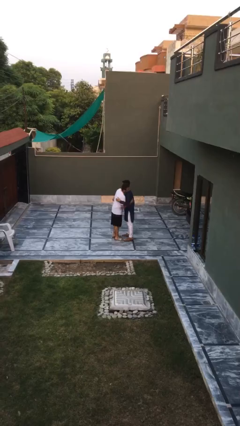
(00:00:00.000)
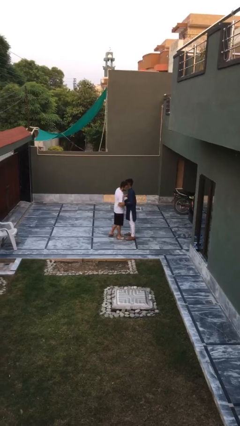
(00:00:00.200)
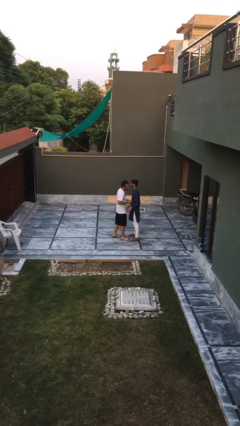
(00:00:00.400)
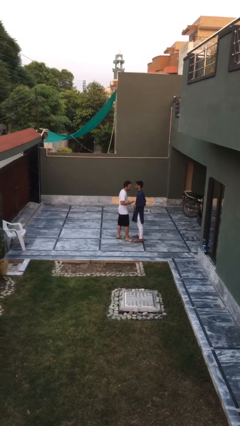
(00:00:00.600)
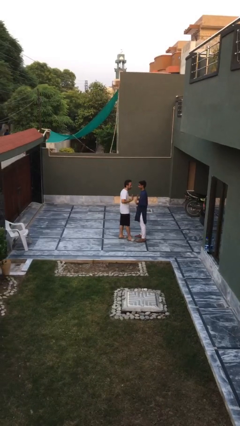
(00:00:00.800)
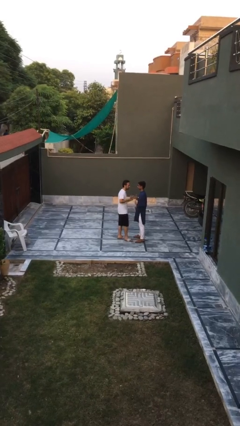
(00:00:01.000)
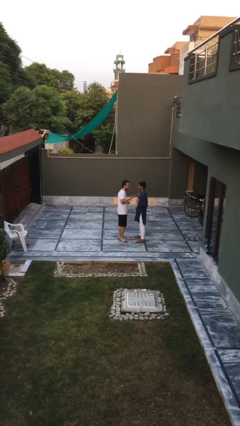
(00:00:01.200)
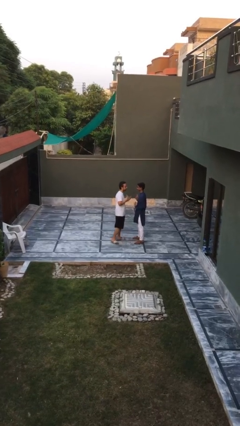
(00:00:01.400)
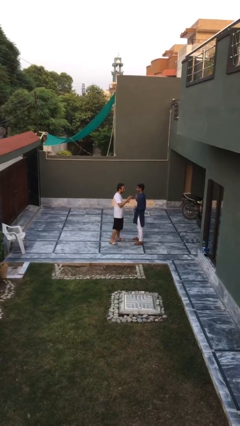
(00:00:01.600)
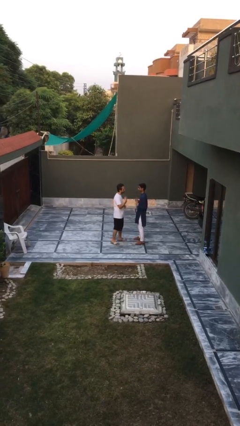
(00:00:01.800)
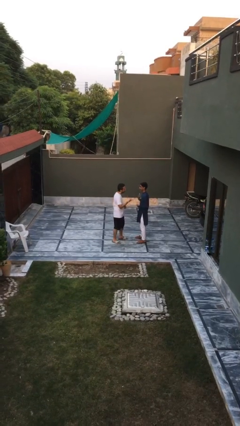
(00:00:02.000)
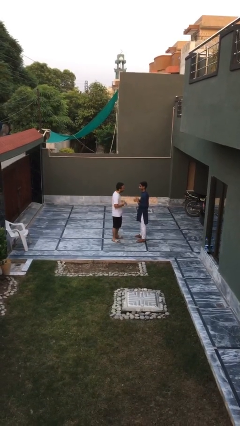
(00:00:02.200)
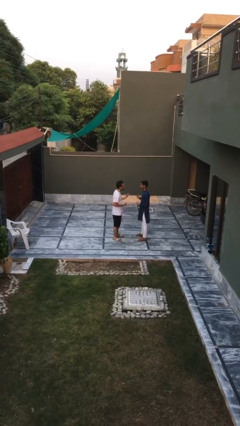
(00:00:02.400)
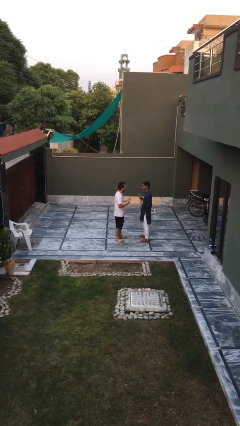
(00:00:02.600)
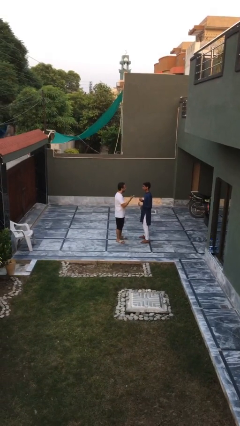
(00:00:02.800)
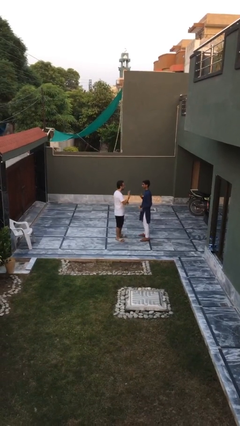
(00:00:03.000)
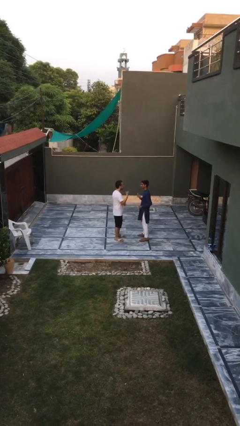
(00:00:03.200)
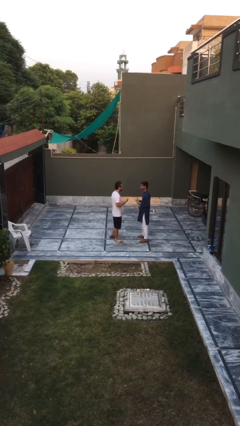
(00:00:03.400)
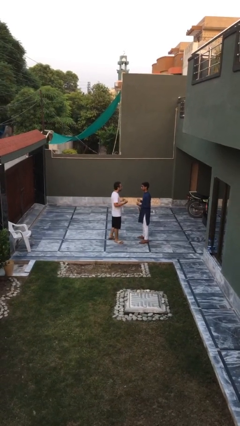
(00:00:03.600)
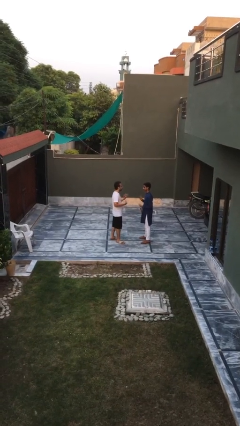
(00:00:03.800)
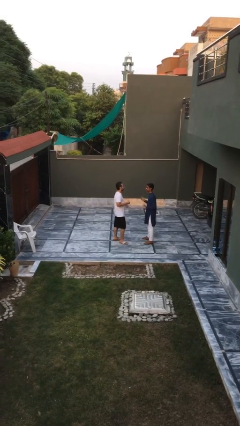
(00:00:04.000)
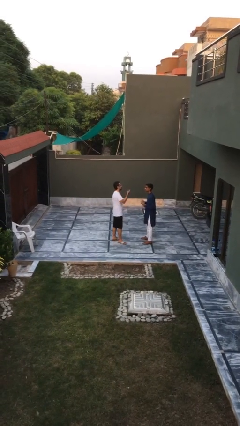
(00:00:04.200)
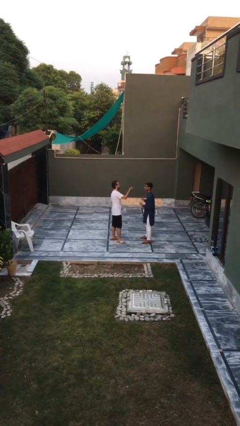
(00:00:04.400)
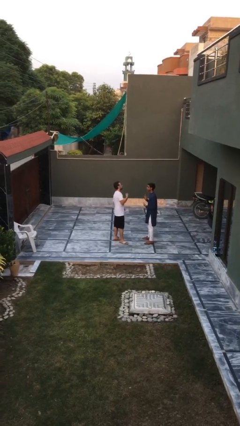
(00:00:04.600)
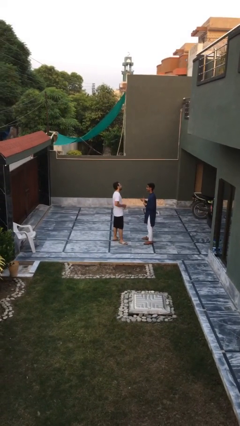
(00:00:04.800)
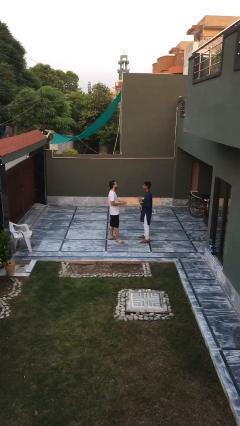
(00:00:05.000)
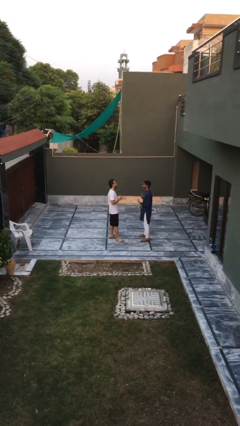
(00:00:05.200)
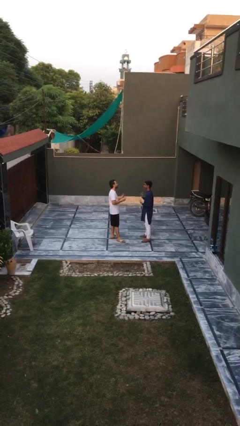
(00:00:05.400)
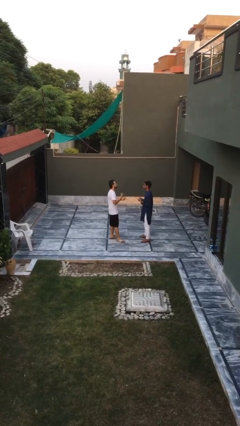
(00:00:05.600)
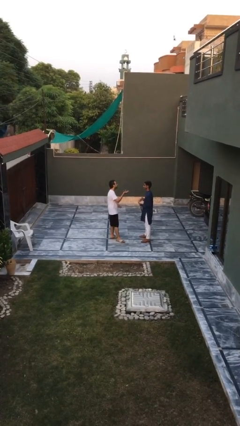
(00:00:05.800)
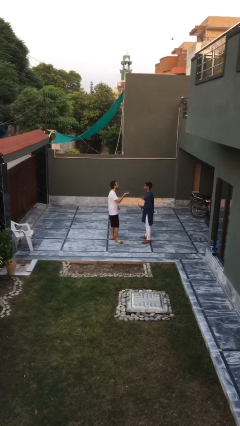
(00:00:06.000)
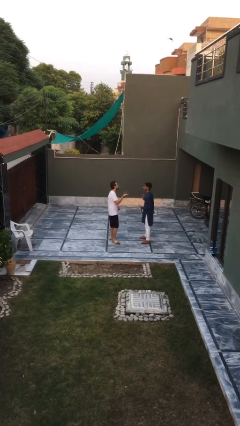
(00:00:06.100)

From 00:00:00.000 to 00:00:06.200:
person talks to person

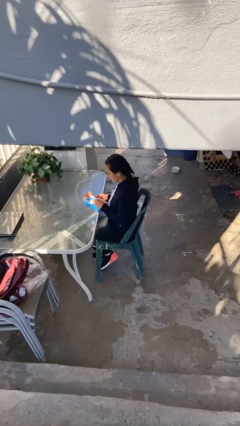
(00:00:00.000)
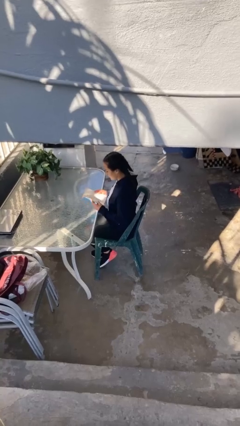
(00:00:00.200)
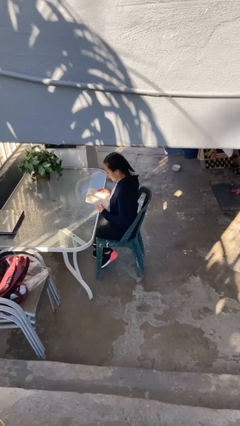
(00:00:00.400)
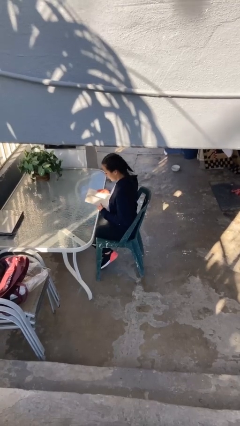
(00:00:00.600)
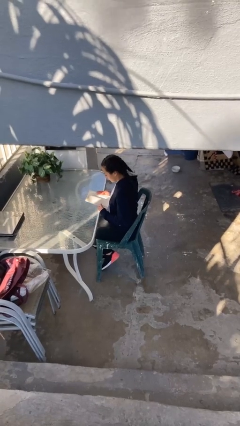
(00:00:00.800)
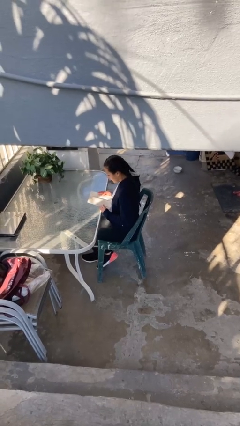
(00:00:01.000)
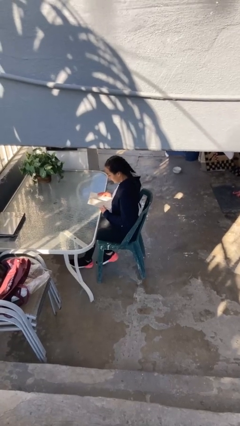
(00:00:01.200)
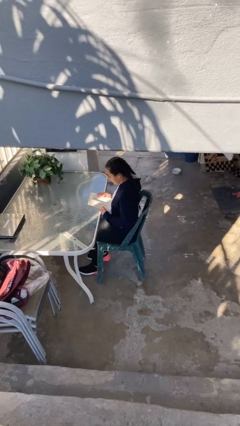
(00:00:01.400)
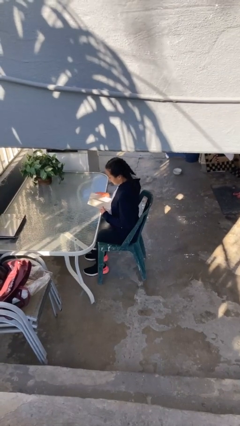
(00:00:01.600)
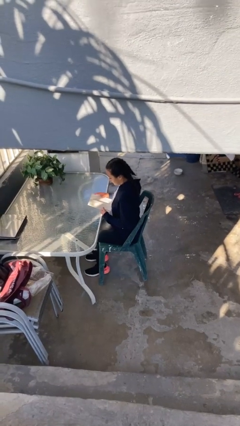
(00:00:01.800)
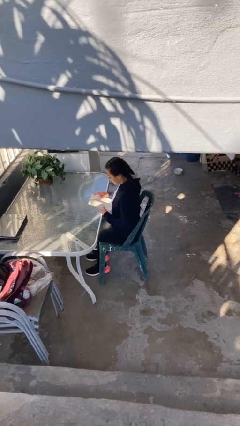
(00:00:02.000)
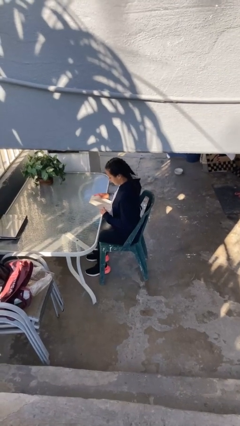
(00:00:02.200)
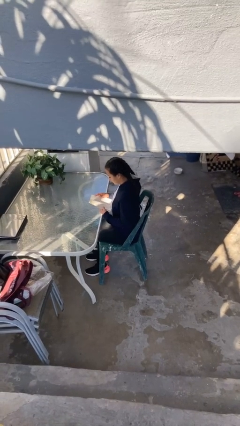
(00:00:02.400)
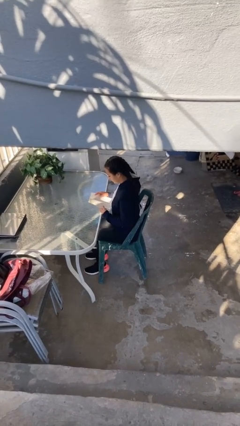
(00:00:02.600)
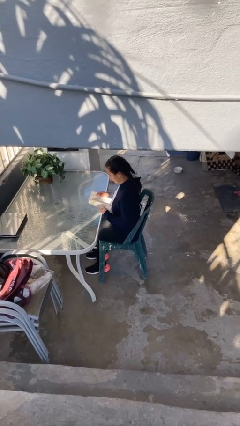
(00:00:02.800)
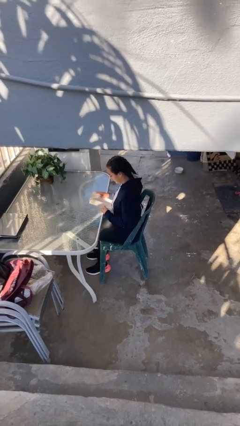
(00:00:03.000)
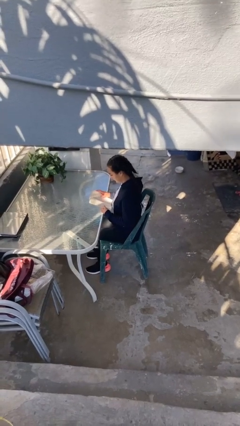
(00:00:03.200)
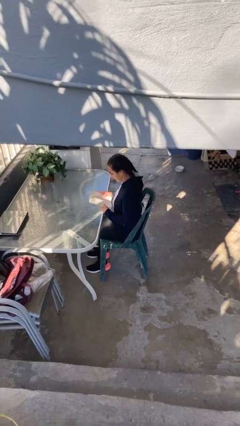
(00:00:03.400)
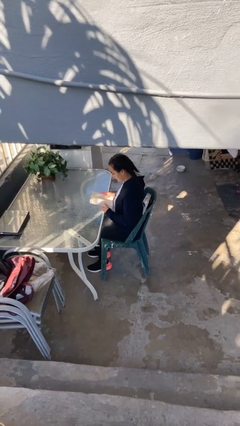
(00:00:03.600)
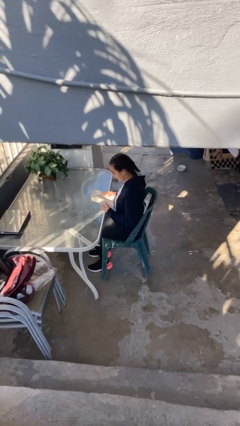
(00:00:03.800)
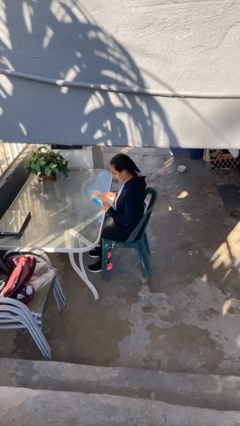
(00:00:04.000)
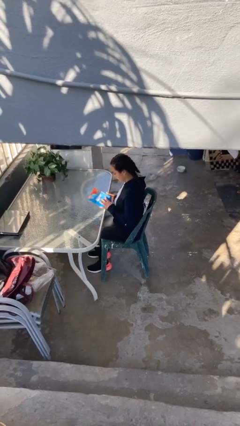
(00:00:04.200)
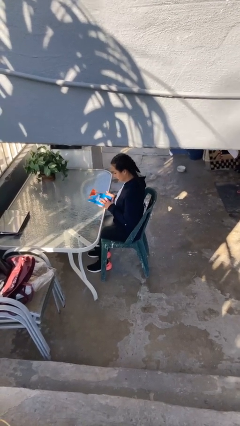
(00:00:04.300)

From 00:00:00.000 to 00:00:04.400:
person reads document

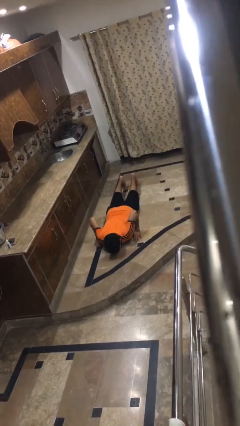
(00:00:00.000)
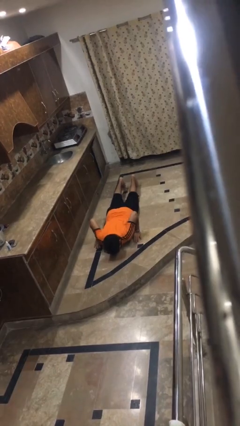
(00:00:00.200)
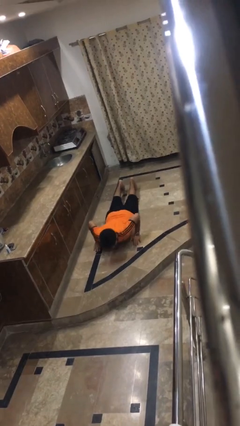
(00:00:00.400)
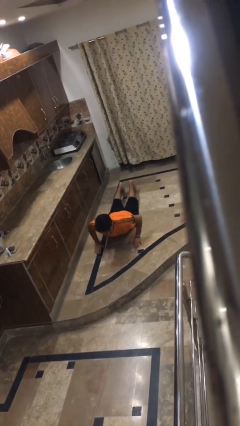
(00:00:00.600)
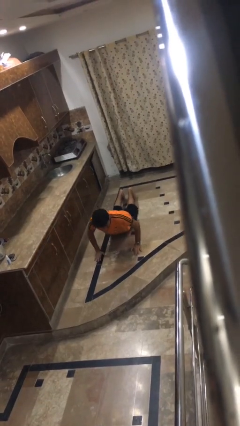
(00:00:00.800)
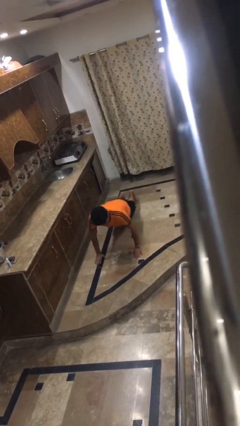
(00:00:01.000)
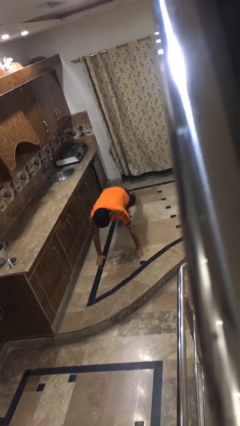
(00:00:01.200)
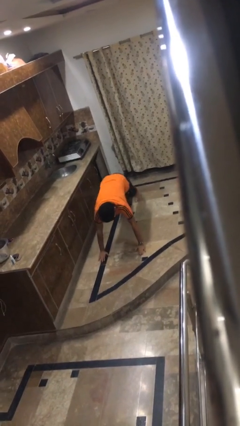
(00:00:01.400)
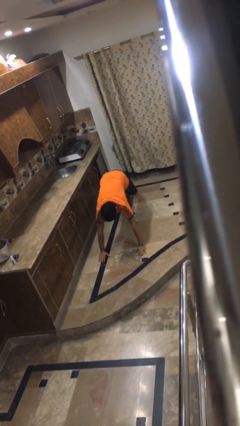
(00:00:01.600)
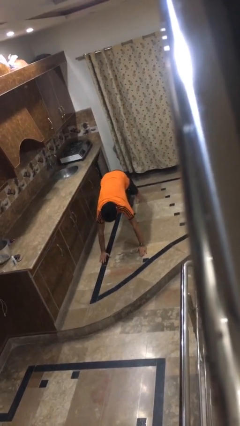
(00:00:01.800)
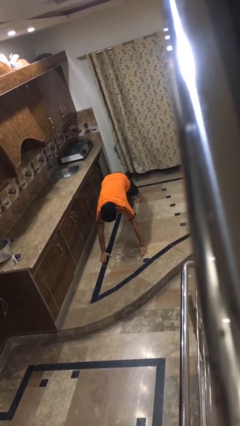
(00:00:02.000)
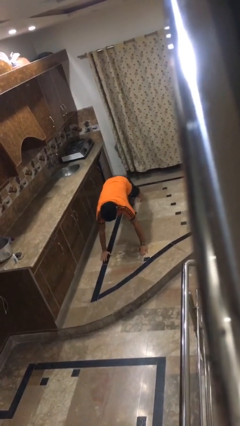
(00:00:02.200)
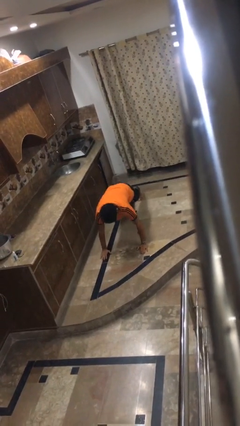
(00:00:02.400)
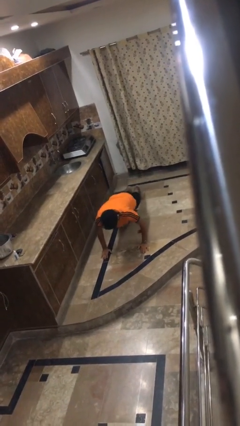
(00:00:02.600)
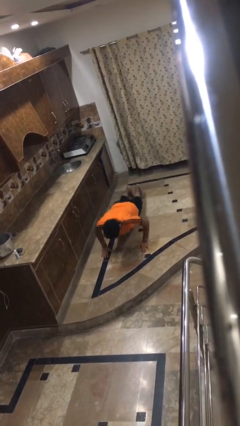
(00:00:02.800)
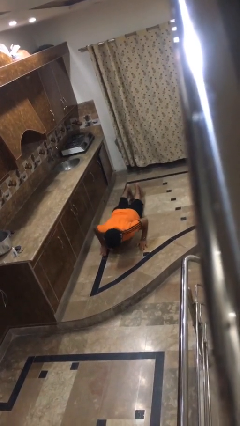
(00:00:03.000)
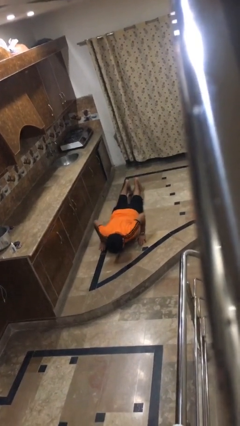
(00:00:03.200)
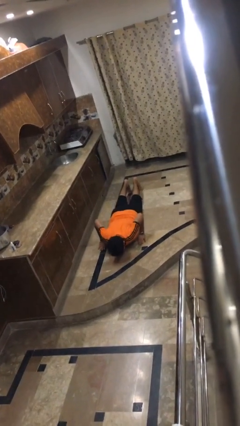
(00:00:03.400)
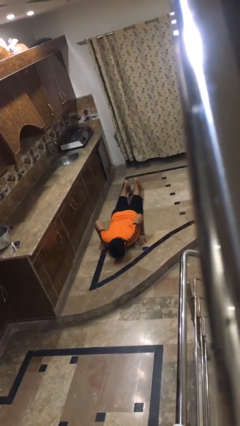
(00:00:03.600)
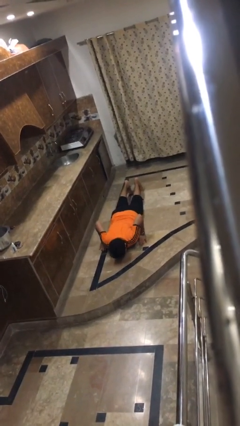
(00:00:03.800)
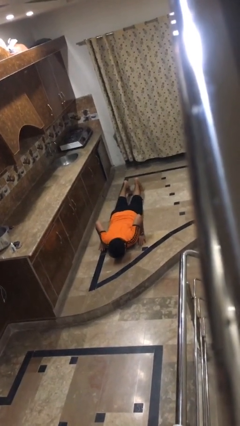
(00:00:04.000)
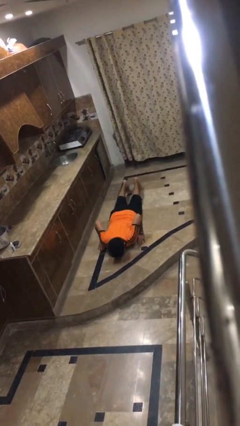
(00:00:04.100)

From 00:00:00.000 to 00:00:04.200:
person exercises with pushup

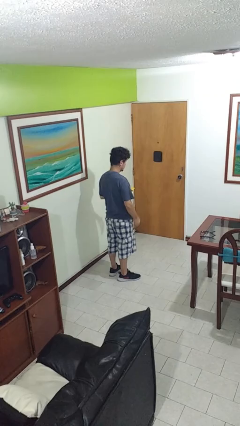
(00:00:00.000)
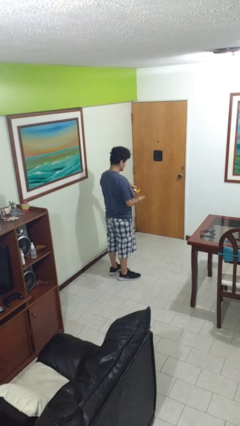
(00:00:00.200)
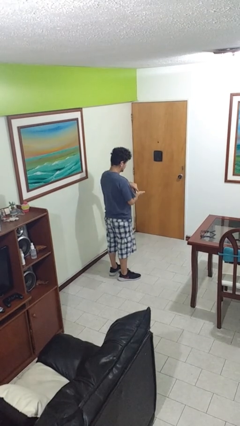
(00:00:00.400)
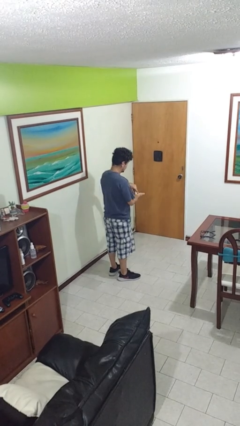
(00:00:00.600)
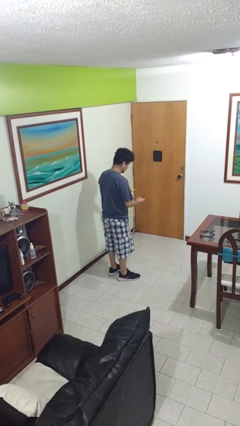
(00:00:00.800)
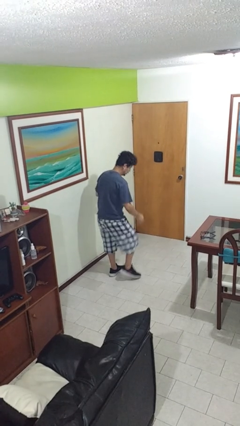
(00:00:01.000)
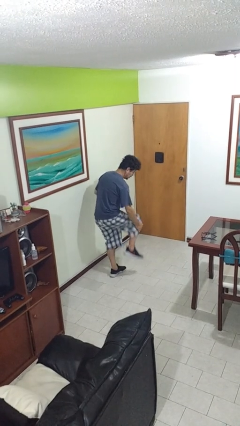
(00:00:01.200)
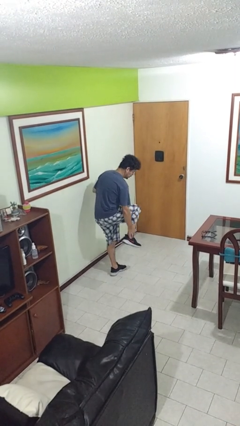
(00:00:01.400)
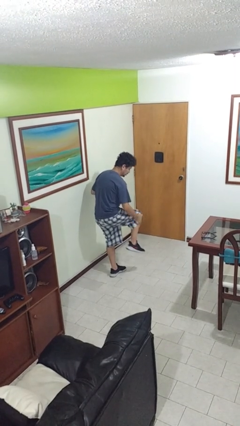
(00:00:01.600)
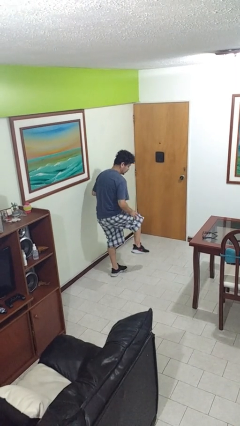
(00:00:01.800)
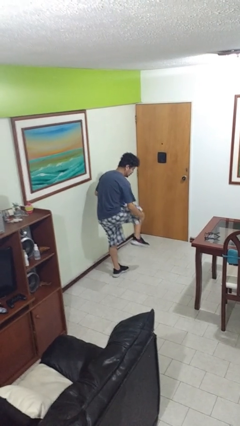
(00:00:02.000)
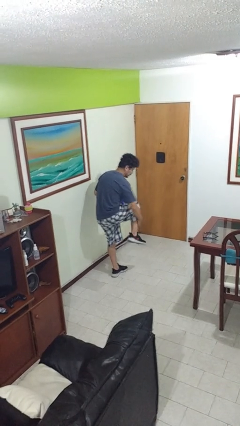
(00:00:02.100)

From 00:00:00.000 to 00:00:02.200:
person applies sunscreen

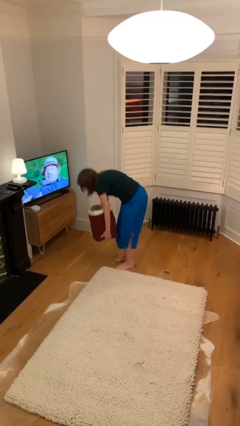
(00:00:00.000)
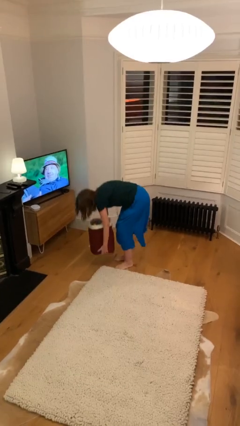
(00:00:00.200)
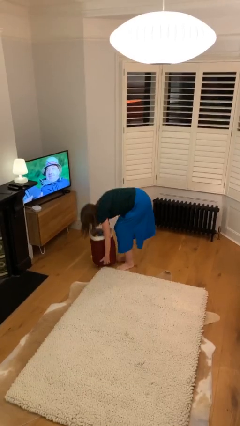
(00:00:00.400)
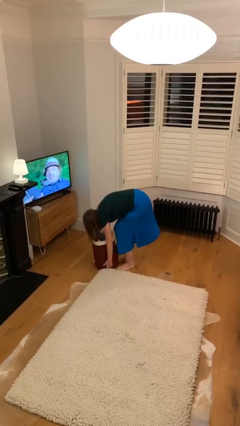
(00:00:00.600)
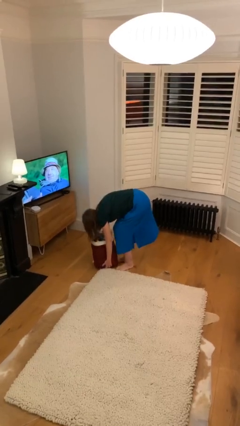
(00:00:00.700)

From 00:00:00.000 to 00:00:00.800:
person puts down object on floor
